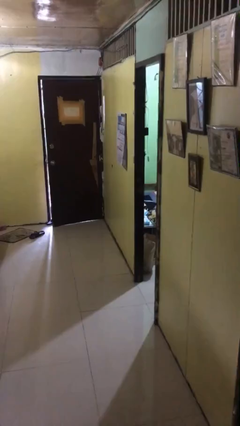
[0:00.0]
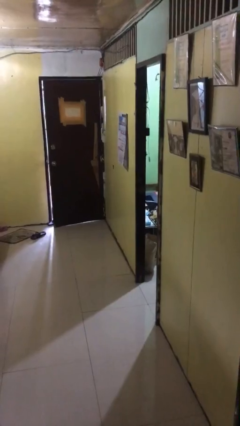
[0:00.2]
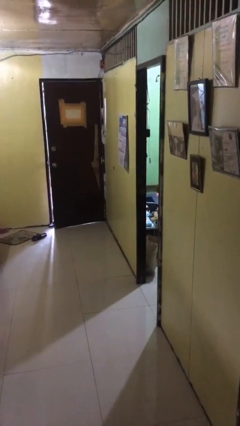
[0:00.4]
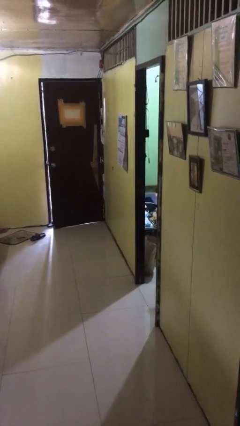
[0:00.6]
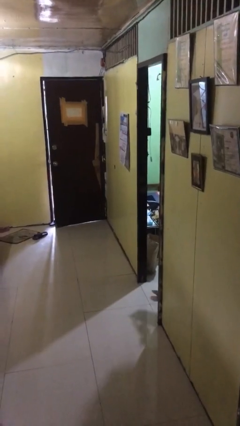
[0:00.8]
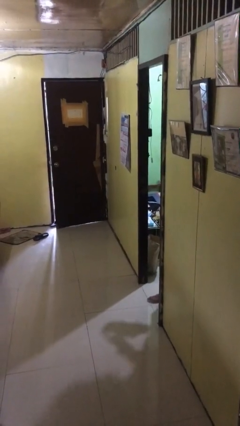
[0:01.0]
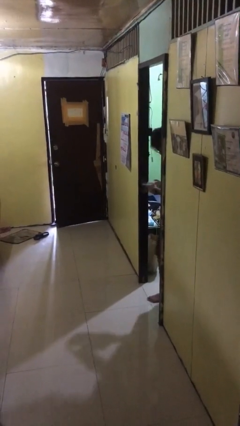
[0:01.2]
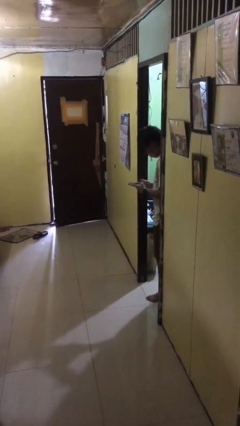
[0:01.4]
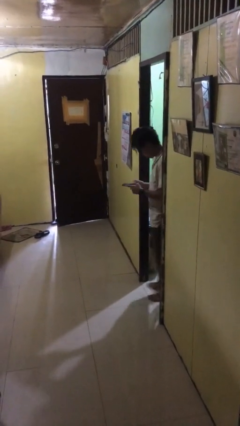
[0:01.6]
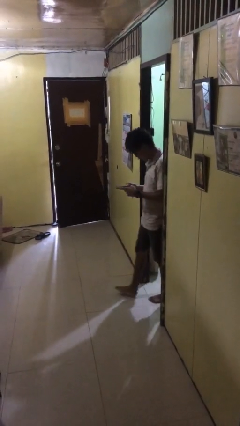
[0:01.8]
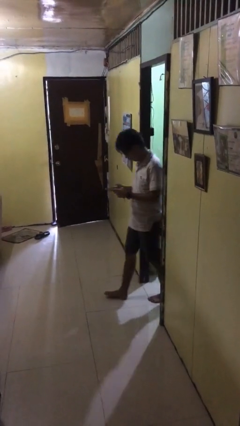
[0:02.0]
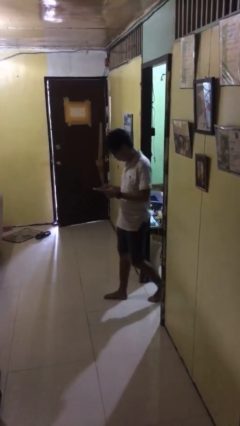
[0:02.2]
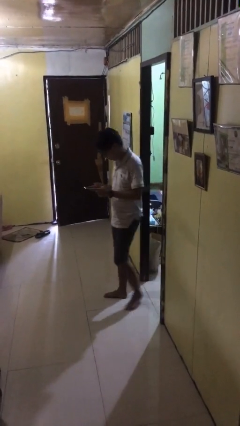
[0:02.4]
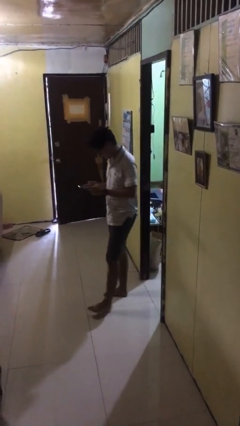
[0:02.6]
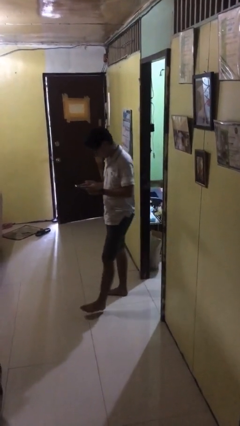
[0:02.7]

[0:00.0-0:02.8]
person enters scene through structure

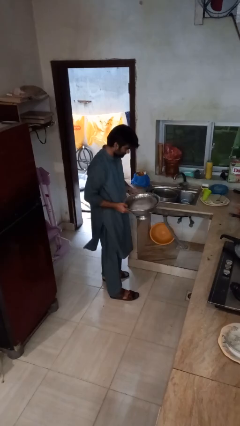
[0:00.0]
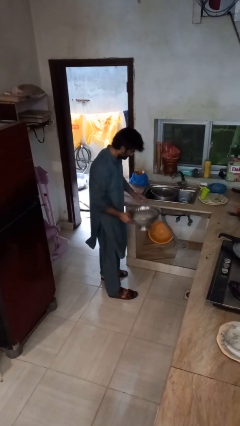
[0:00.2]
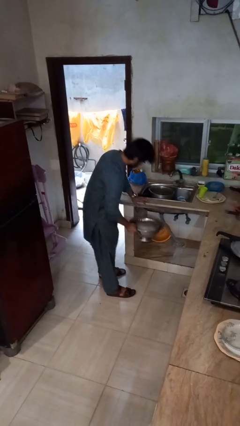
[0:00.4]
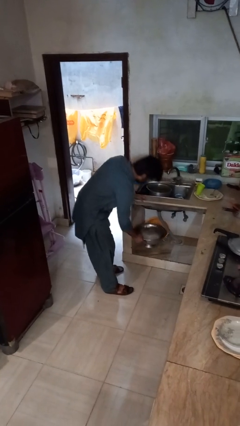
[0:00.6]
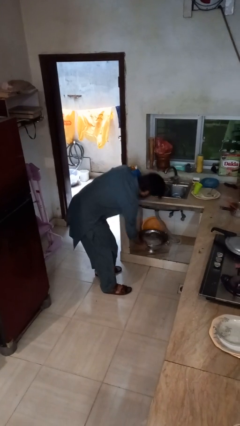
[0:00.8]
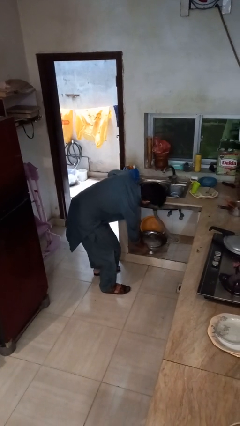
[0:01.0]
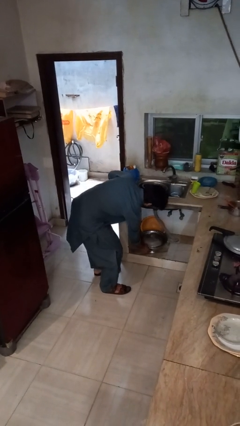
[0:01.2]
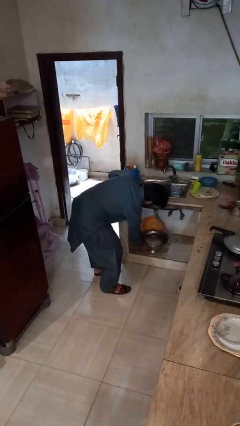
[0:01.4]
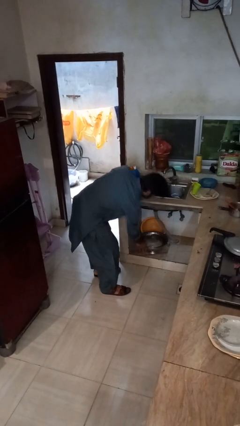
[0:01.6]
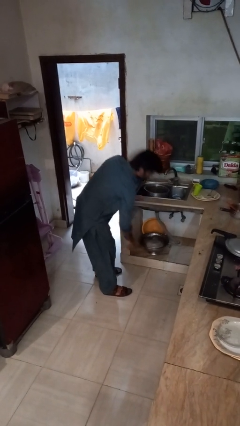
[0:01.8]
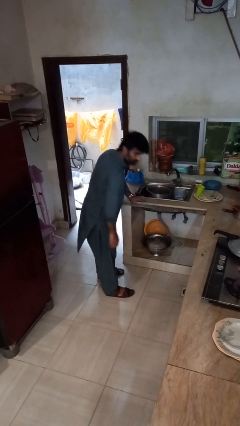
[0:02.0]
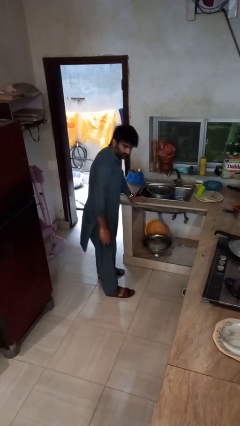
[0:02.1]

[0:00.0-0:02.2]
person puts down object into cabinet

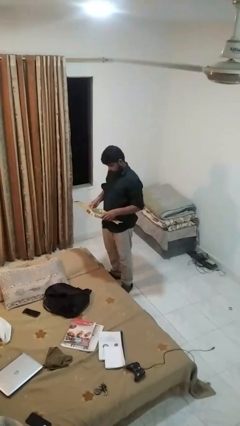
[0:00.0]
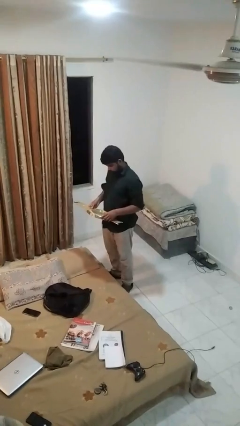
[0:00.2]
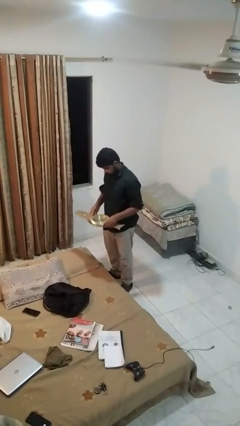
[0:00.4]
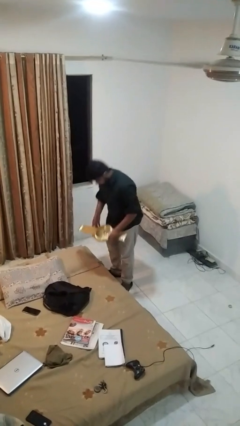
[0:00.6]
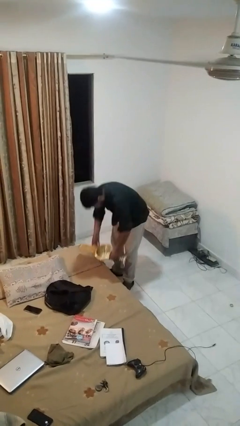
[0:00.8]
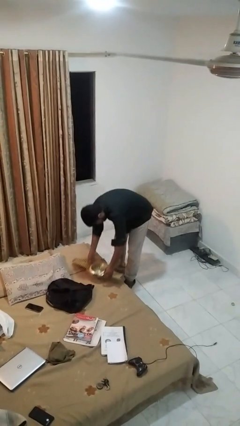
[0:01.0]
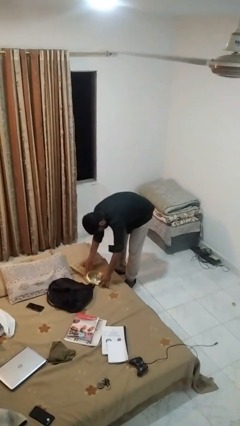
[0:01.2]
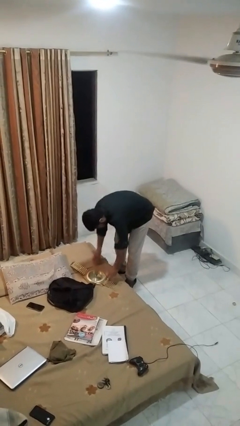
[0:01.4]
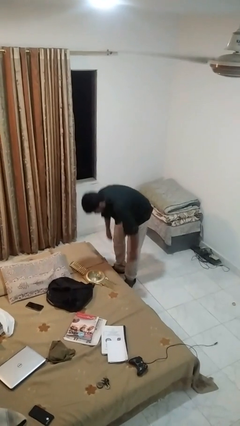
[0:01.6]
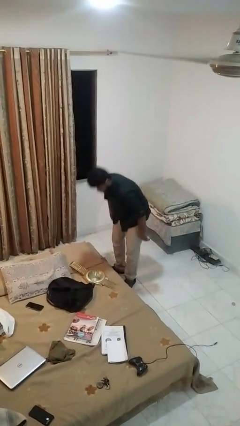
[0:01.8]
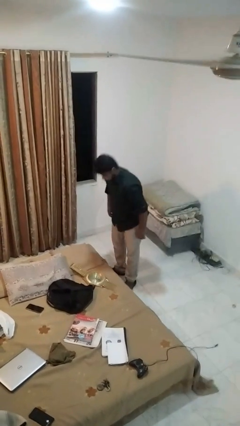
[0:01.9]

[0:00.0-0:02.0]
person puts down object on bed

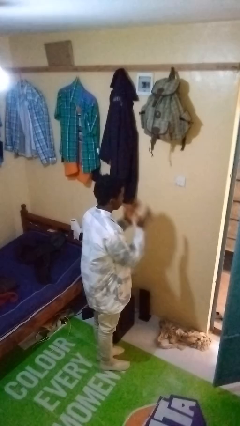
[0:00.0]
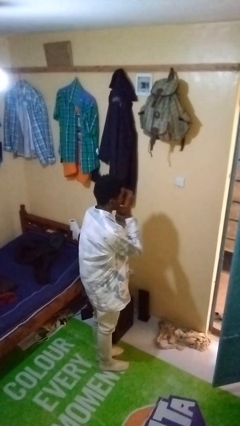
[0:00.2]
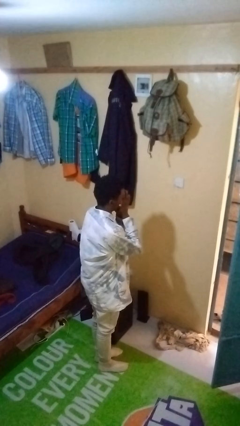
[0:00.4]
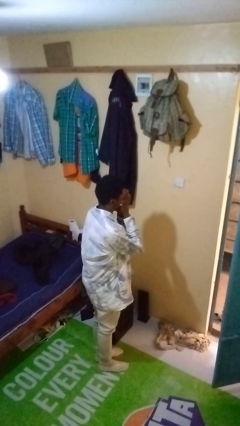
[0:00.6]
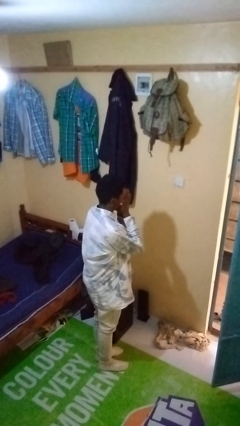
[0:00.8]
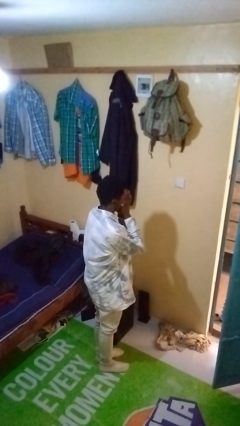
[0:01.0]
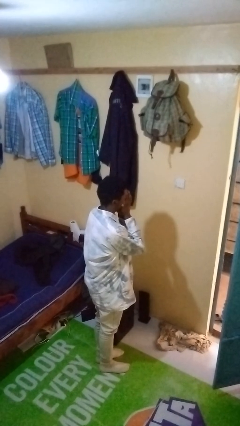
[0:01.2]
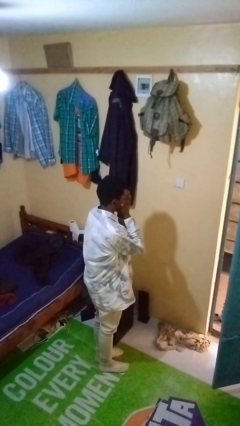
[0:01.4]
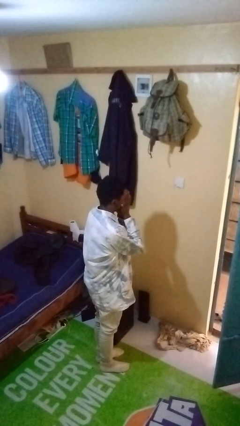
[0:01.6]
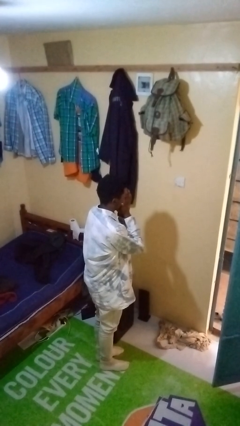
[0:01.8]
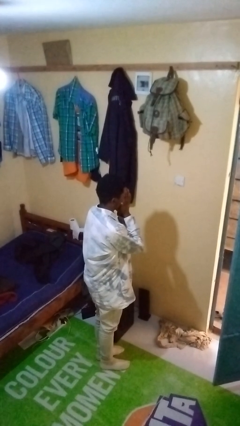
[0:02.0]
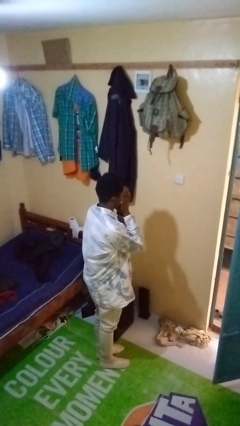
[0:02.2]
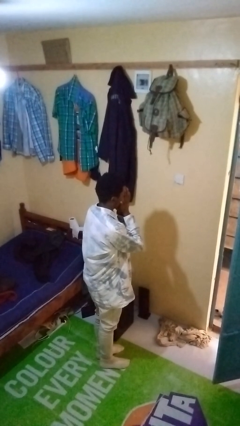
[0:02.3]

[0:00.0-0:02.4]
person covers face with hands

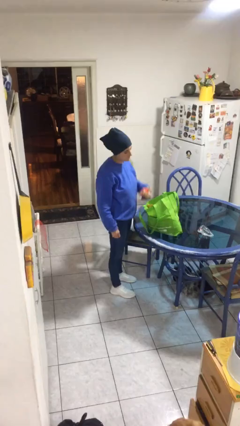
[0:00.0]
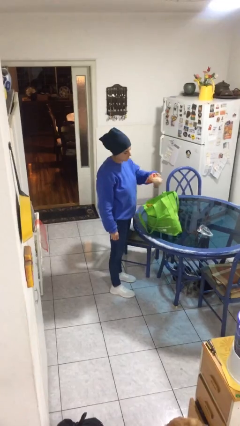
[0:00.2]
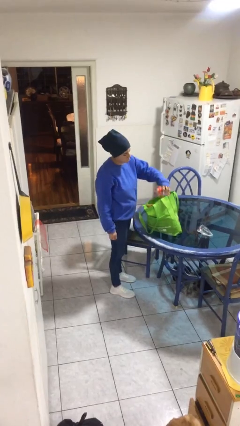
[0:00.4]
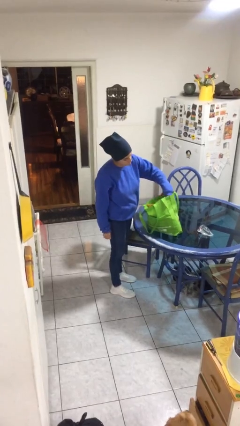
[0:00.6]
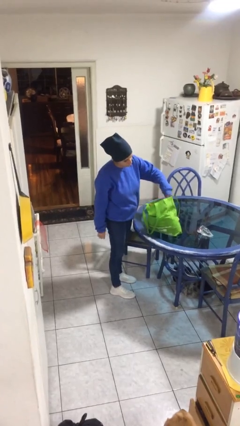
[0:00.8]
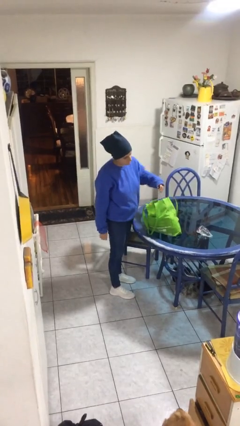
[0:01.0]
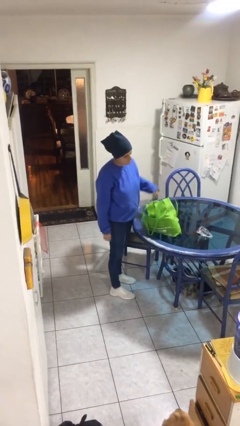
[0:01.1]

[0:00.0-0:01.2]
person puts object into bag

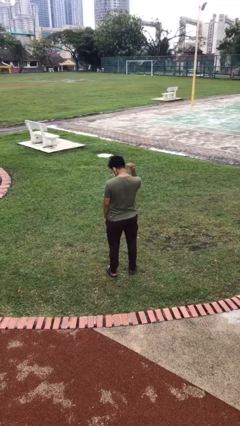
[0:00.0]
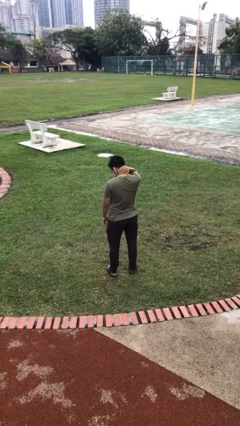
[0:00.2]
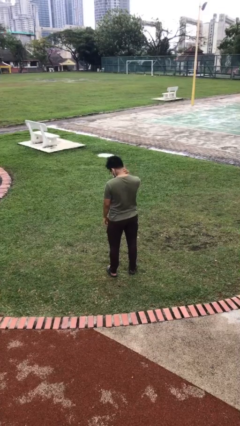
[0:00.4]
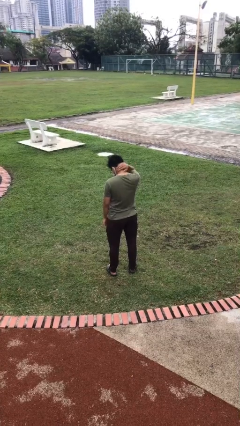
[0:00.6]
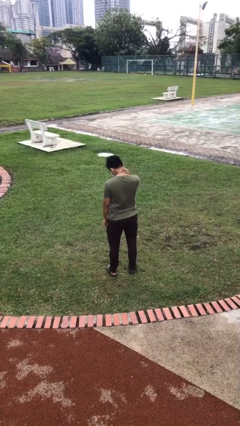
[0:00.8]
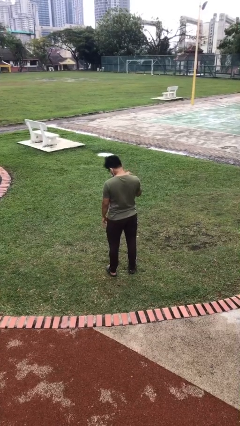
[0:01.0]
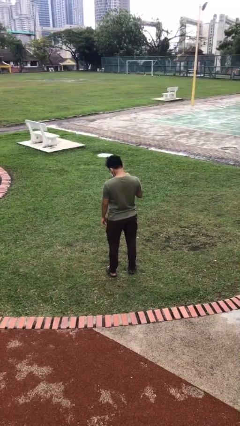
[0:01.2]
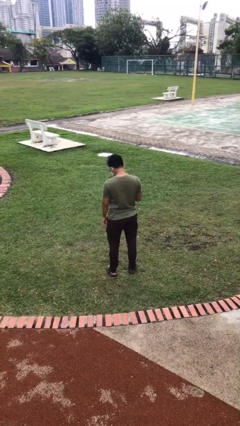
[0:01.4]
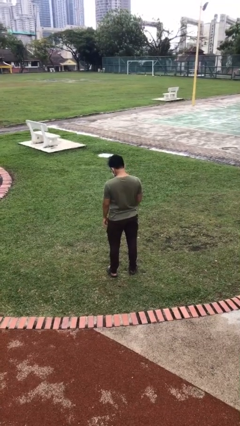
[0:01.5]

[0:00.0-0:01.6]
person rubs neck

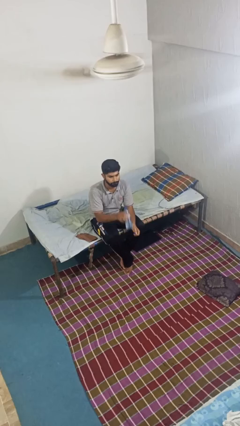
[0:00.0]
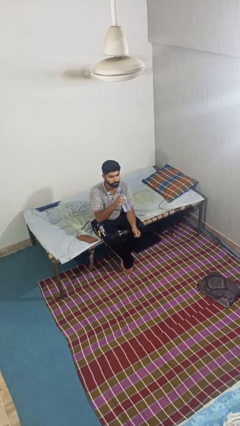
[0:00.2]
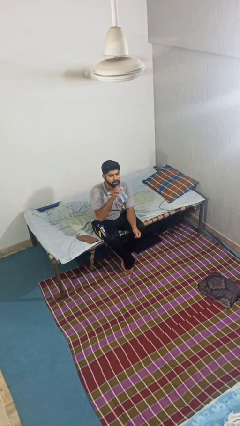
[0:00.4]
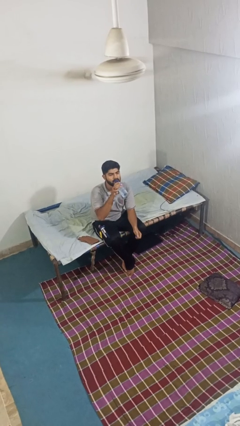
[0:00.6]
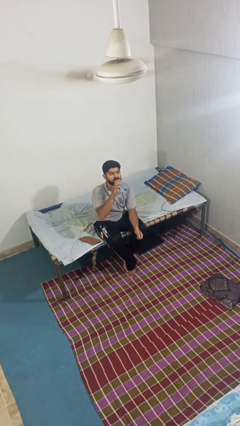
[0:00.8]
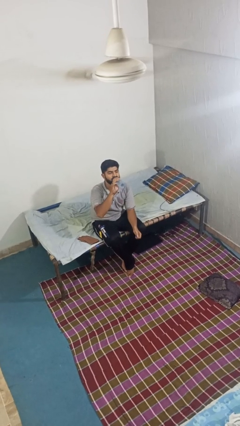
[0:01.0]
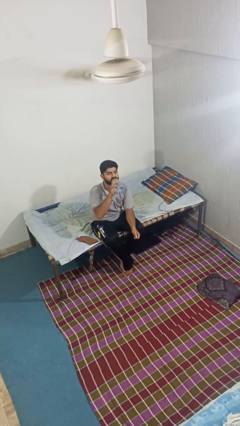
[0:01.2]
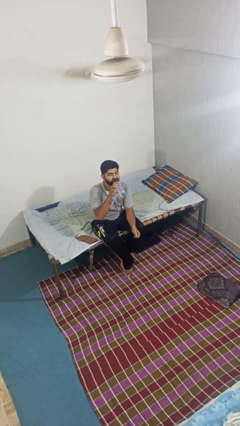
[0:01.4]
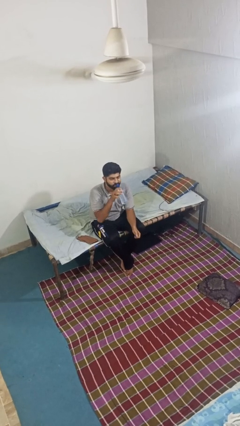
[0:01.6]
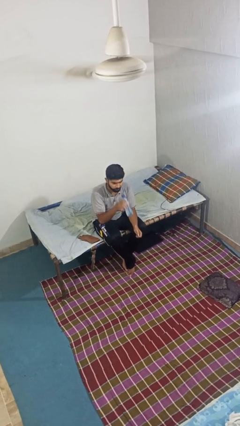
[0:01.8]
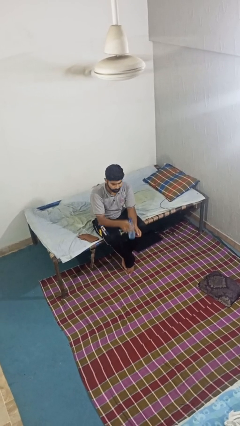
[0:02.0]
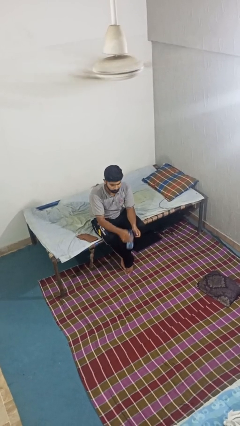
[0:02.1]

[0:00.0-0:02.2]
person drinks from bottle

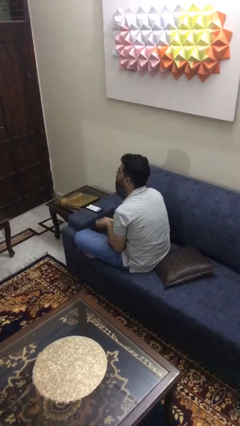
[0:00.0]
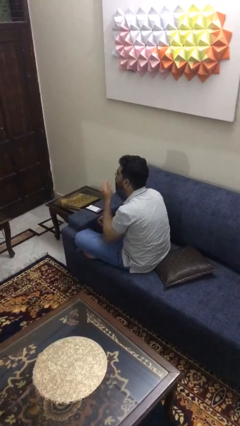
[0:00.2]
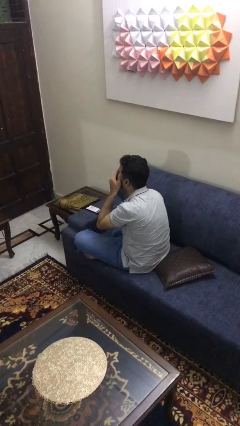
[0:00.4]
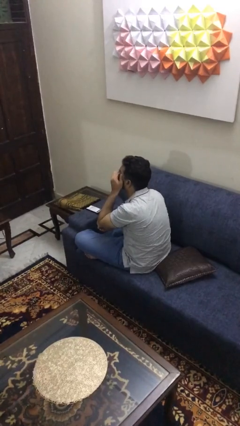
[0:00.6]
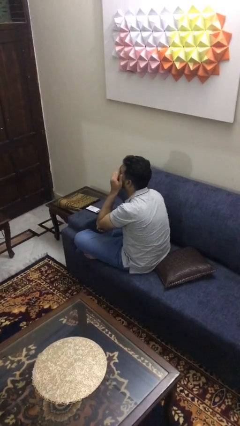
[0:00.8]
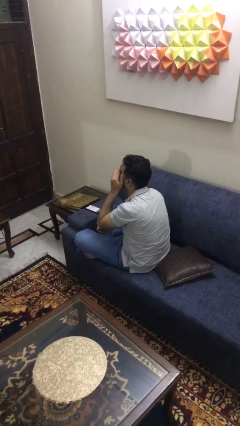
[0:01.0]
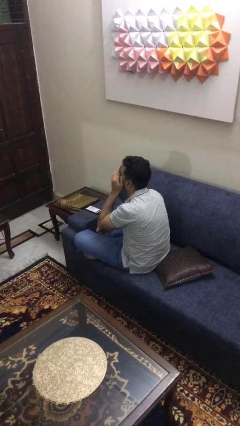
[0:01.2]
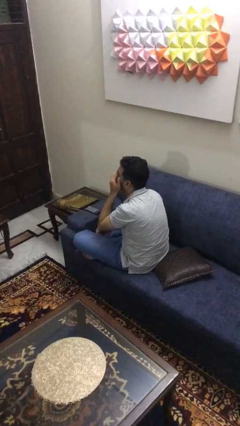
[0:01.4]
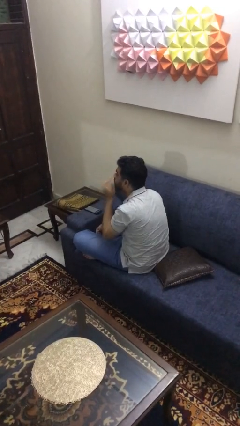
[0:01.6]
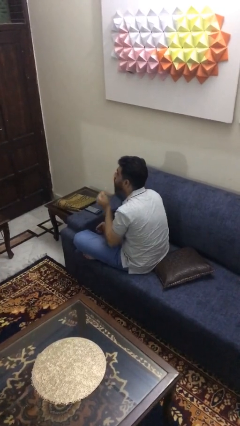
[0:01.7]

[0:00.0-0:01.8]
person rubs eyes

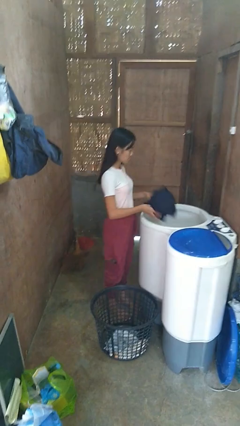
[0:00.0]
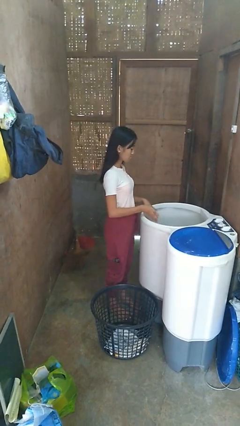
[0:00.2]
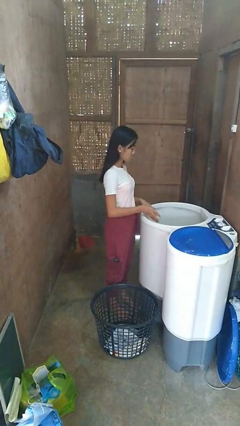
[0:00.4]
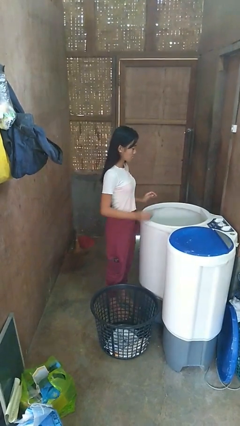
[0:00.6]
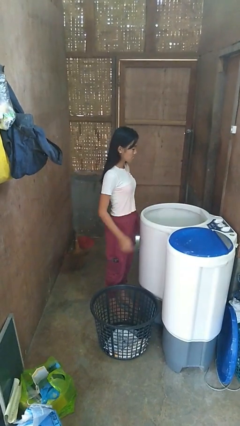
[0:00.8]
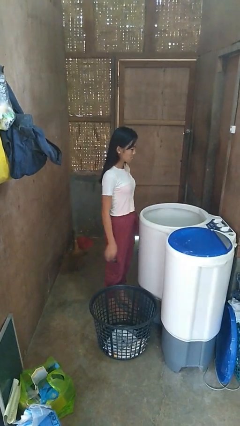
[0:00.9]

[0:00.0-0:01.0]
person loads clotheswasher
